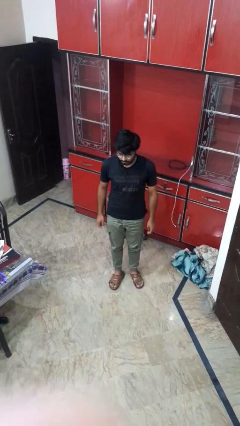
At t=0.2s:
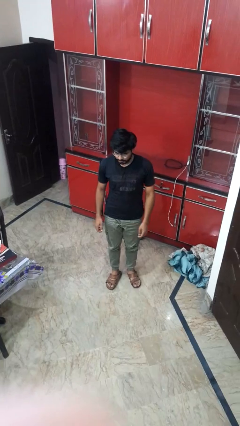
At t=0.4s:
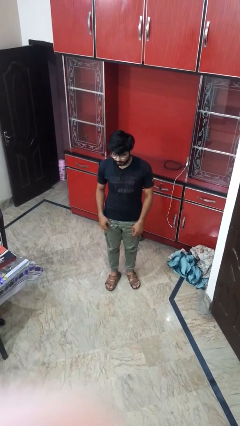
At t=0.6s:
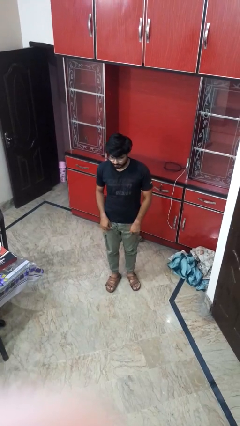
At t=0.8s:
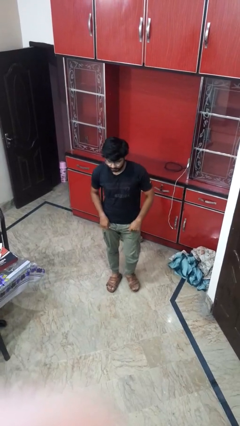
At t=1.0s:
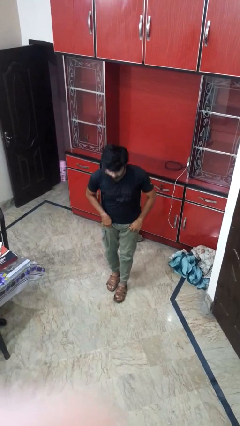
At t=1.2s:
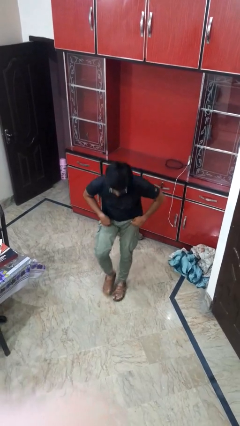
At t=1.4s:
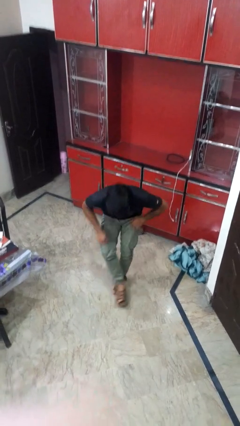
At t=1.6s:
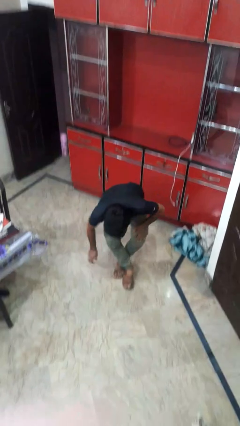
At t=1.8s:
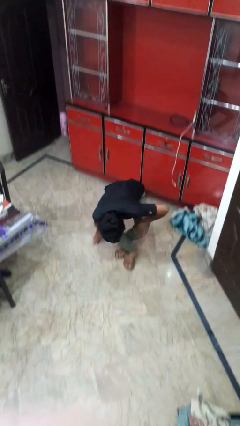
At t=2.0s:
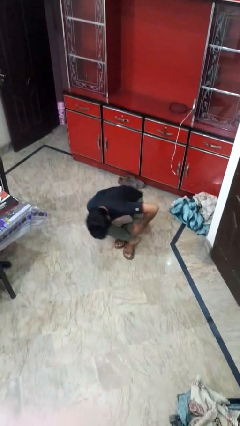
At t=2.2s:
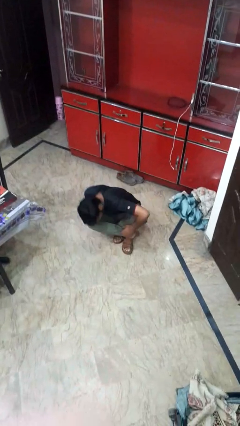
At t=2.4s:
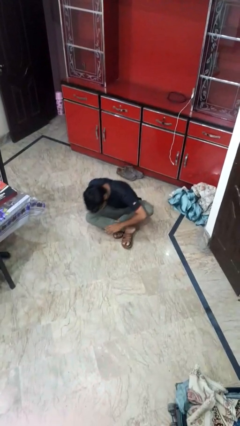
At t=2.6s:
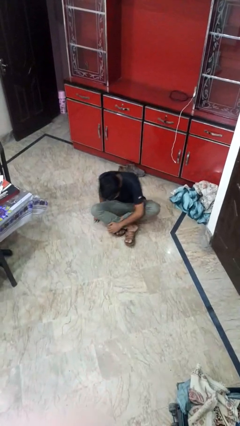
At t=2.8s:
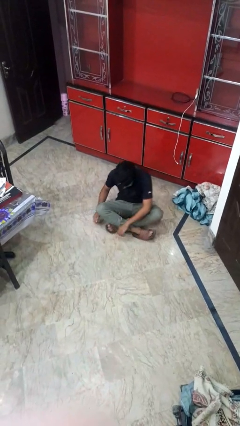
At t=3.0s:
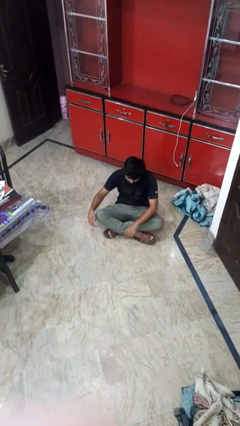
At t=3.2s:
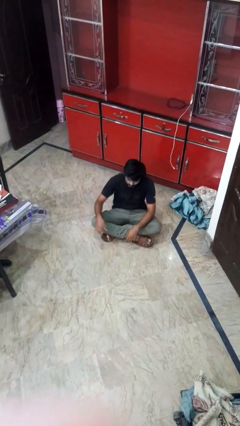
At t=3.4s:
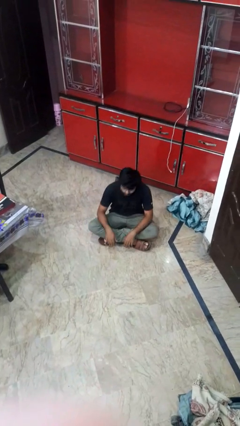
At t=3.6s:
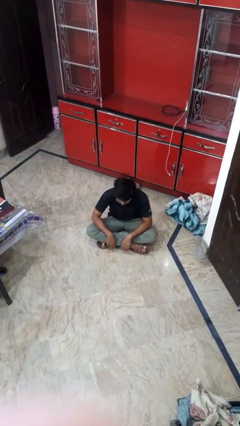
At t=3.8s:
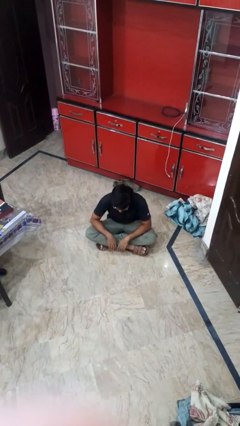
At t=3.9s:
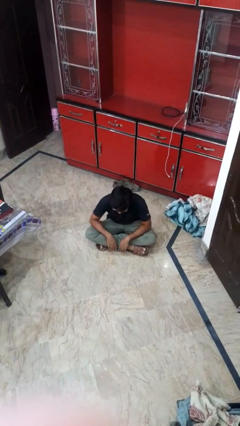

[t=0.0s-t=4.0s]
person sits crisscross

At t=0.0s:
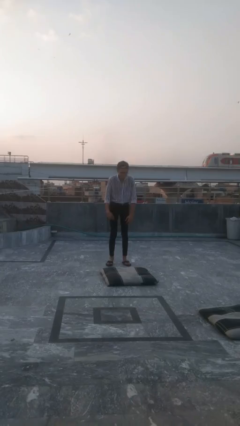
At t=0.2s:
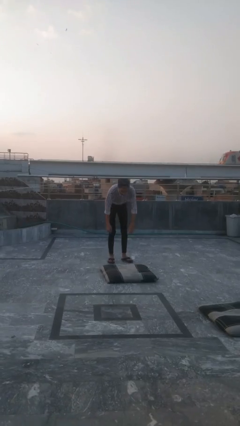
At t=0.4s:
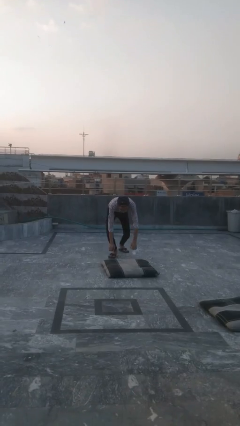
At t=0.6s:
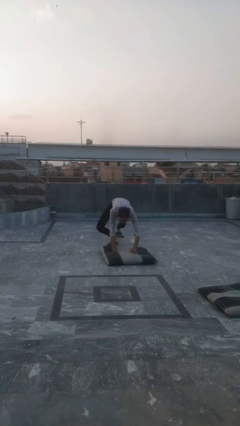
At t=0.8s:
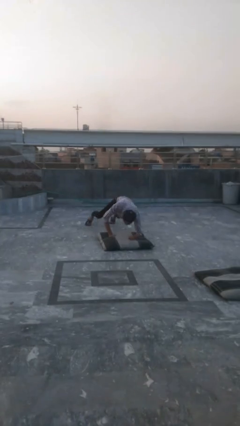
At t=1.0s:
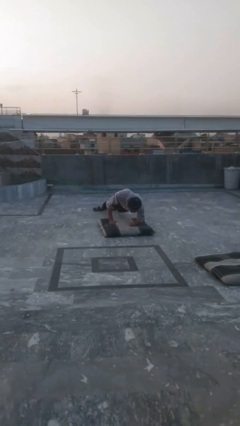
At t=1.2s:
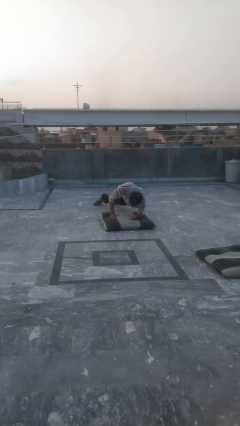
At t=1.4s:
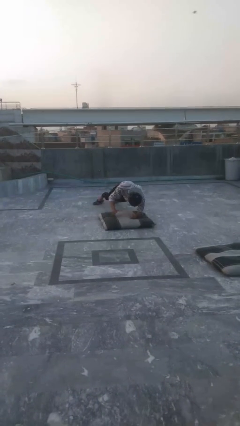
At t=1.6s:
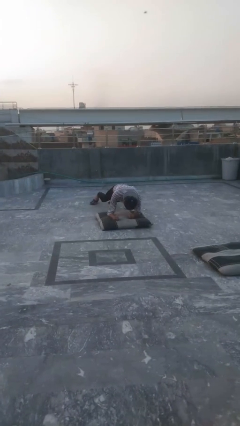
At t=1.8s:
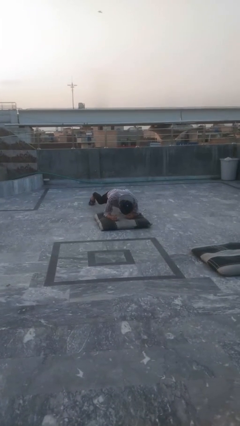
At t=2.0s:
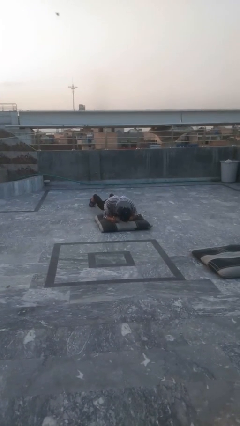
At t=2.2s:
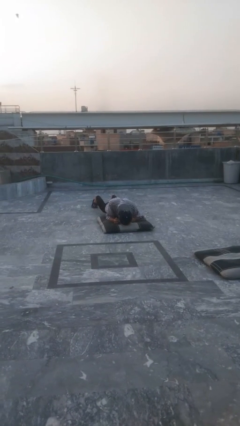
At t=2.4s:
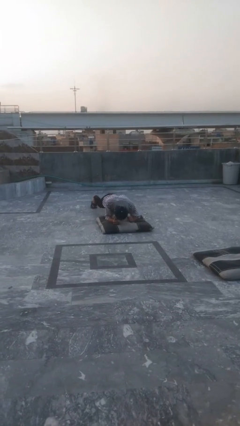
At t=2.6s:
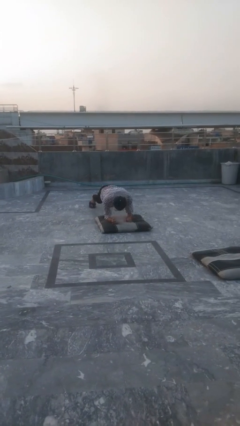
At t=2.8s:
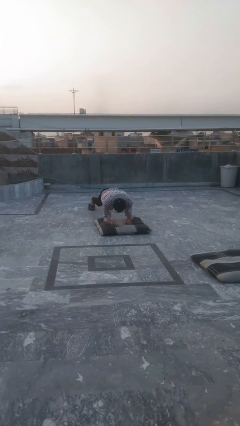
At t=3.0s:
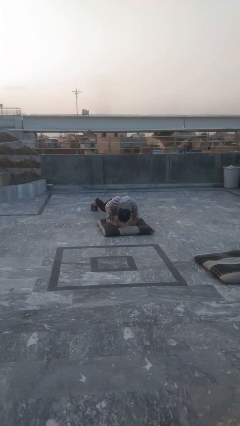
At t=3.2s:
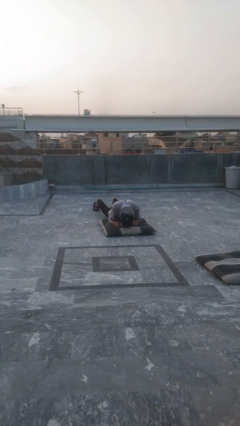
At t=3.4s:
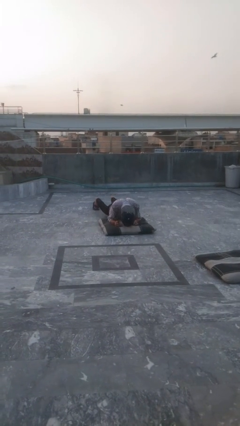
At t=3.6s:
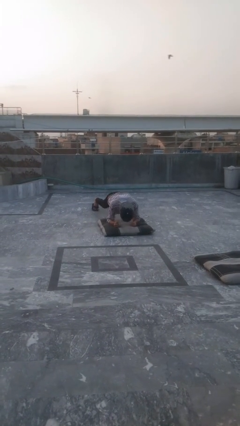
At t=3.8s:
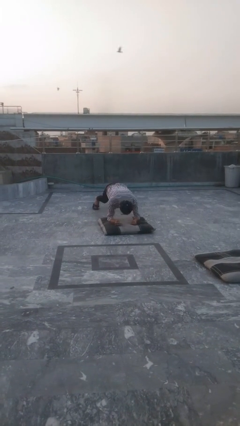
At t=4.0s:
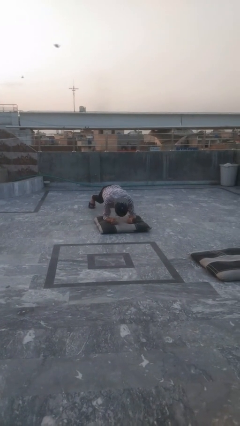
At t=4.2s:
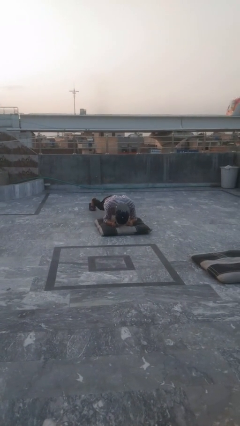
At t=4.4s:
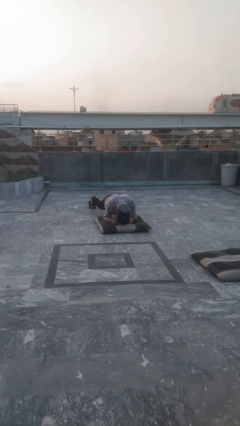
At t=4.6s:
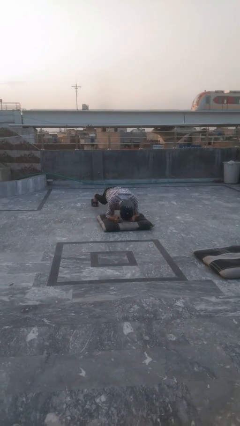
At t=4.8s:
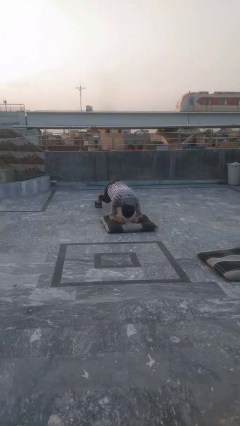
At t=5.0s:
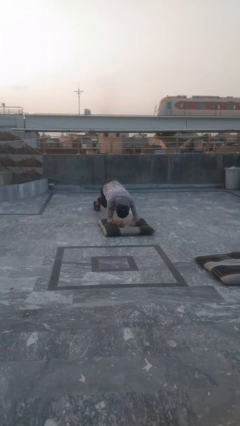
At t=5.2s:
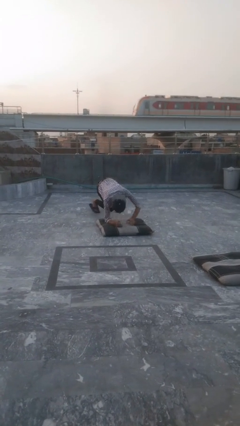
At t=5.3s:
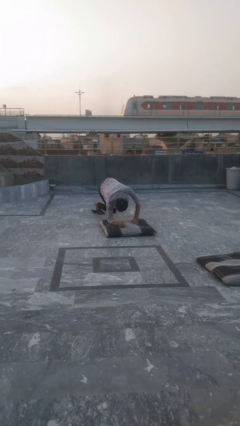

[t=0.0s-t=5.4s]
person exercises with plank

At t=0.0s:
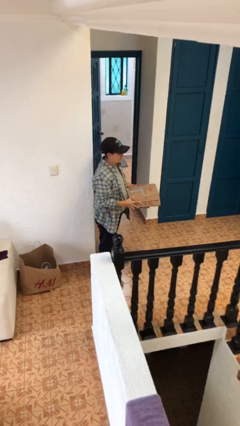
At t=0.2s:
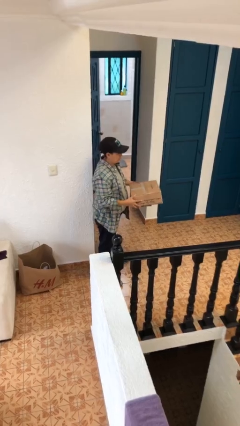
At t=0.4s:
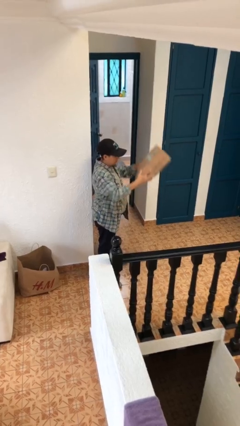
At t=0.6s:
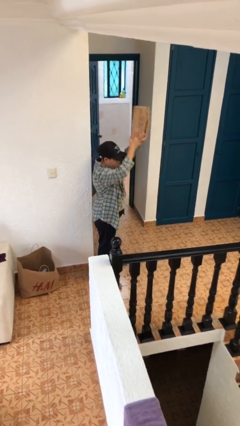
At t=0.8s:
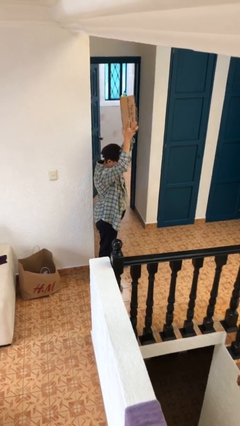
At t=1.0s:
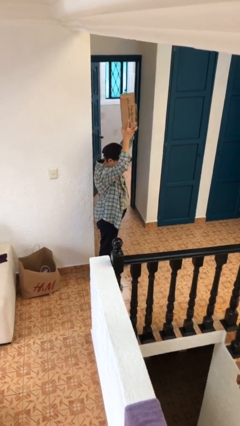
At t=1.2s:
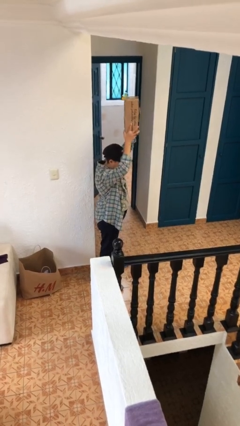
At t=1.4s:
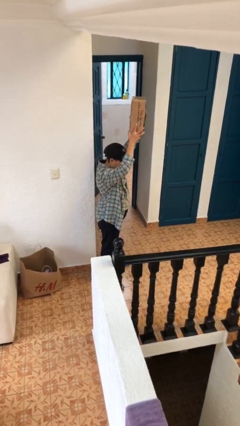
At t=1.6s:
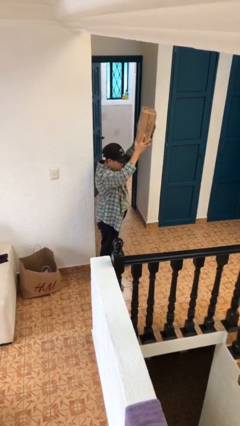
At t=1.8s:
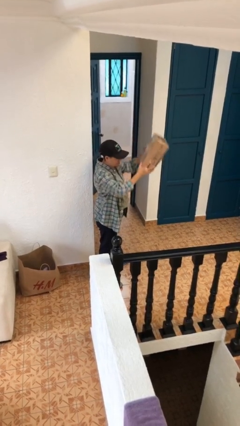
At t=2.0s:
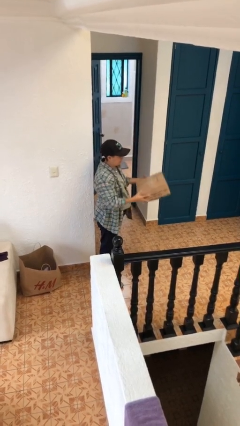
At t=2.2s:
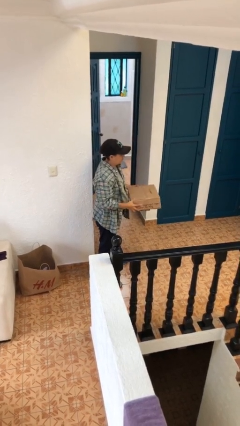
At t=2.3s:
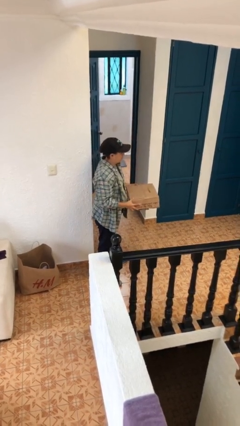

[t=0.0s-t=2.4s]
person holds object above head

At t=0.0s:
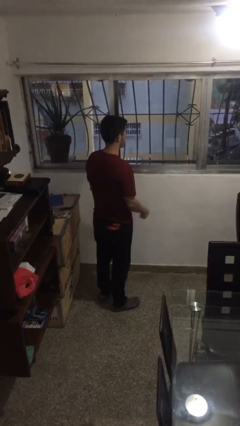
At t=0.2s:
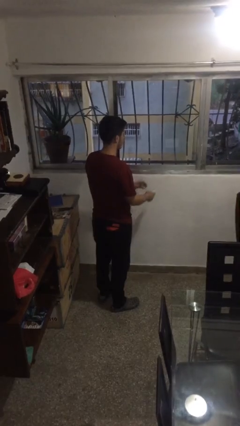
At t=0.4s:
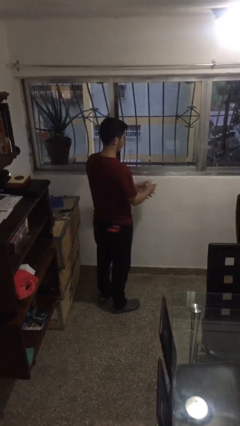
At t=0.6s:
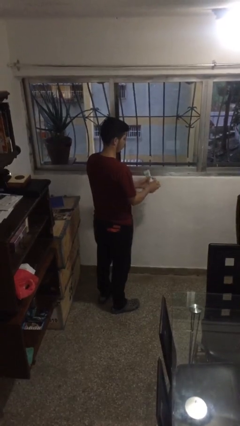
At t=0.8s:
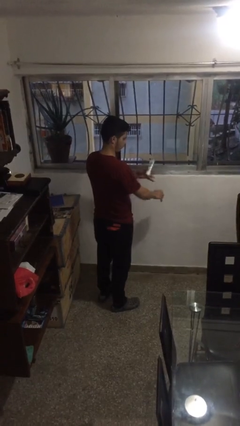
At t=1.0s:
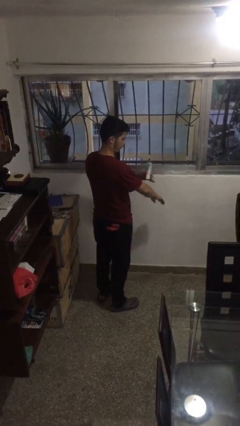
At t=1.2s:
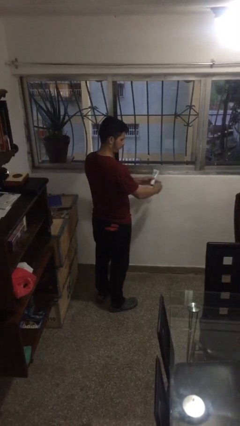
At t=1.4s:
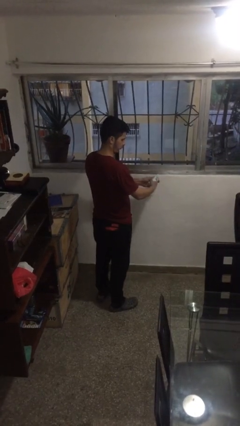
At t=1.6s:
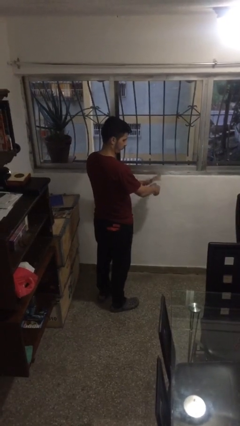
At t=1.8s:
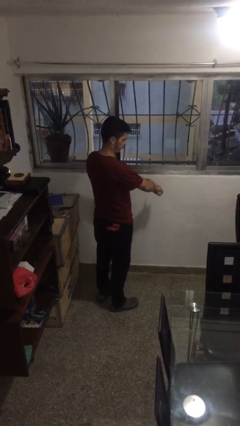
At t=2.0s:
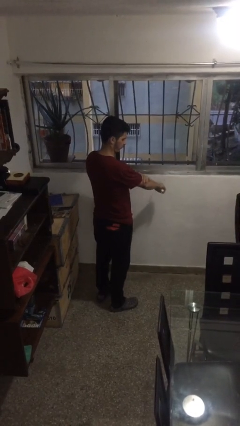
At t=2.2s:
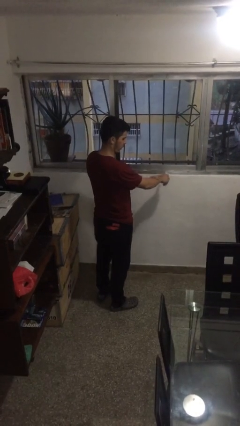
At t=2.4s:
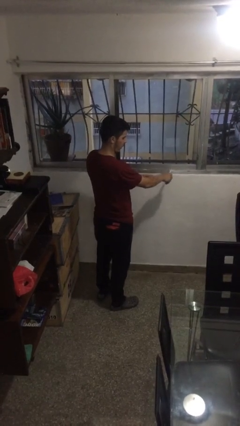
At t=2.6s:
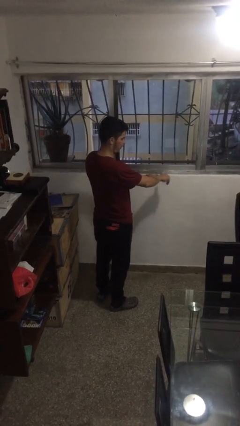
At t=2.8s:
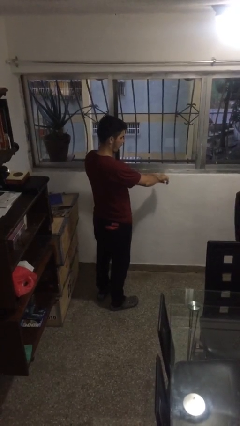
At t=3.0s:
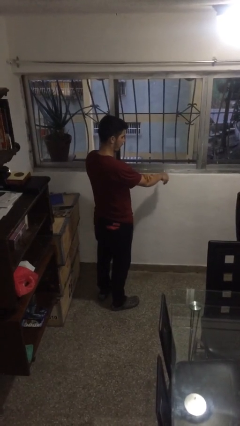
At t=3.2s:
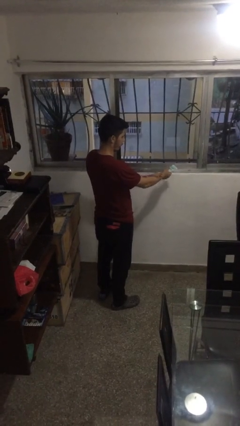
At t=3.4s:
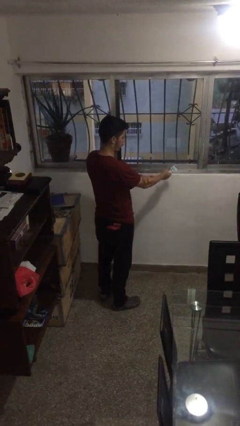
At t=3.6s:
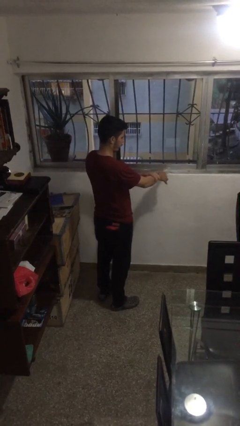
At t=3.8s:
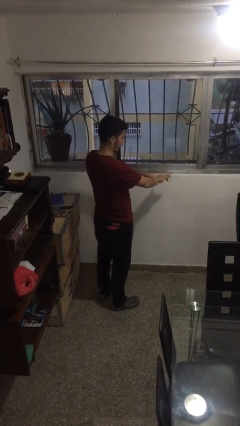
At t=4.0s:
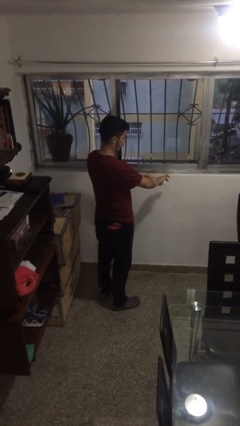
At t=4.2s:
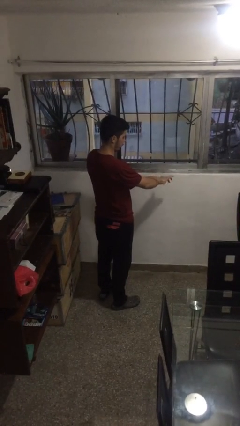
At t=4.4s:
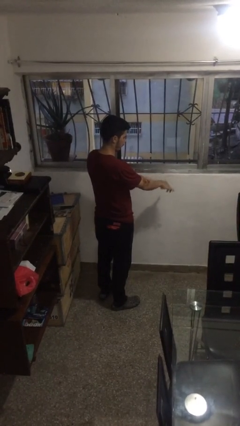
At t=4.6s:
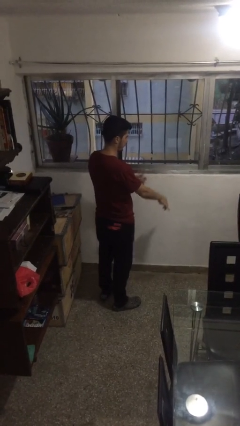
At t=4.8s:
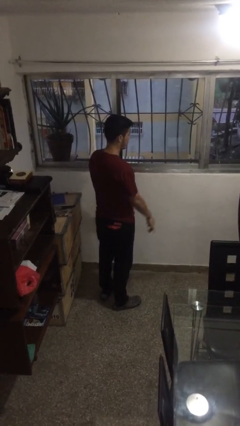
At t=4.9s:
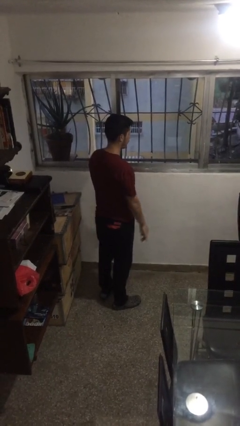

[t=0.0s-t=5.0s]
person applies sunscreen

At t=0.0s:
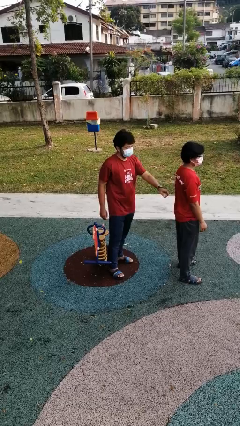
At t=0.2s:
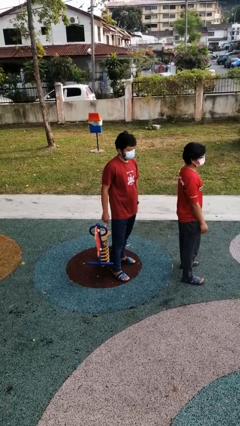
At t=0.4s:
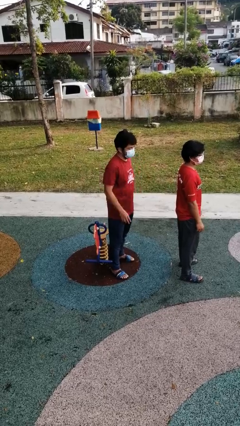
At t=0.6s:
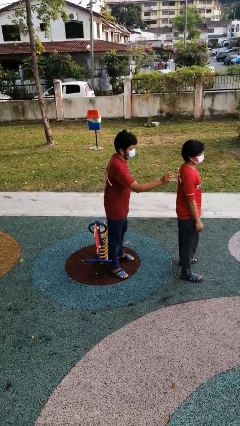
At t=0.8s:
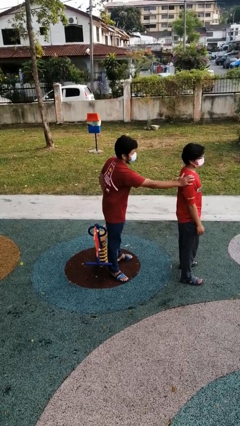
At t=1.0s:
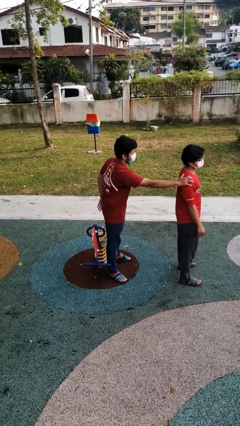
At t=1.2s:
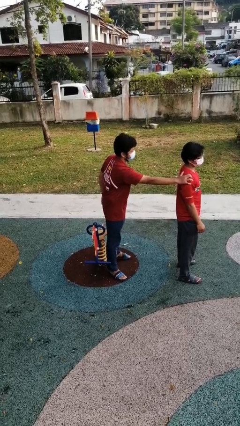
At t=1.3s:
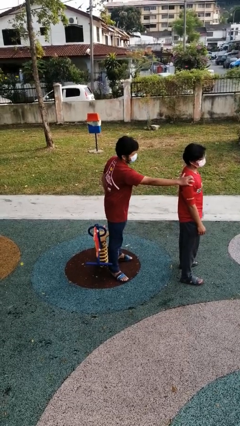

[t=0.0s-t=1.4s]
person grabs person by shoulder
